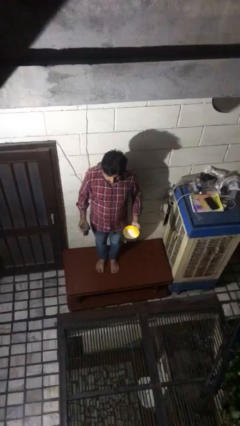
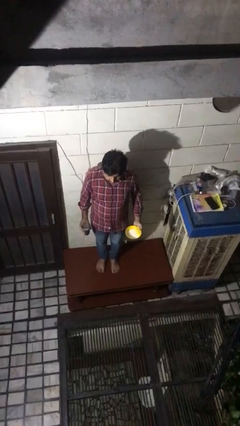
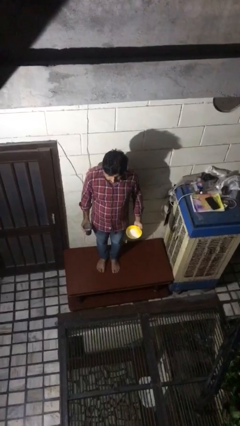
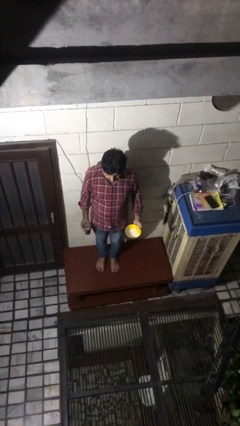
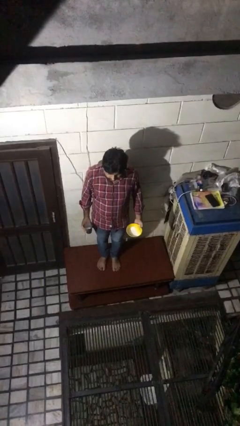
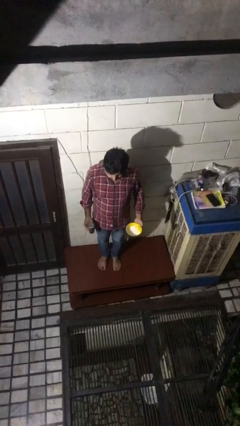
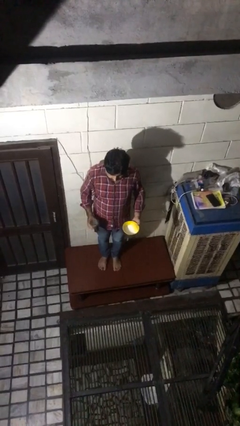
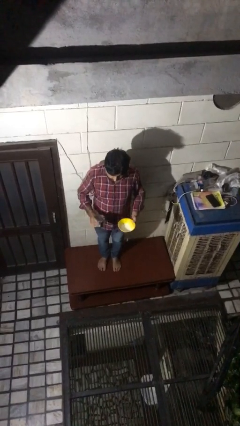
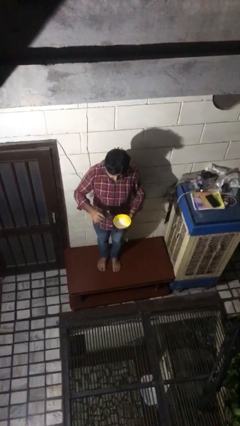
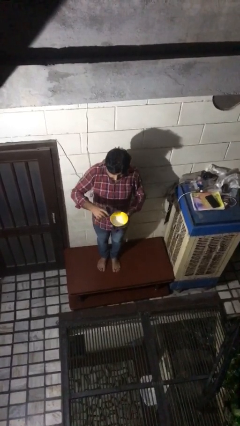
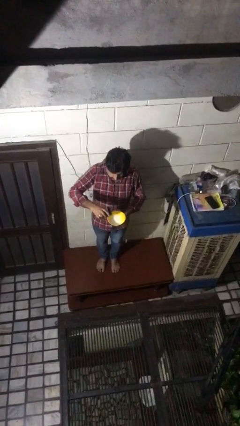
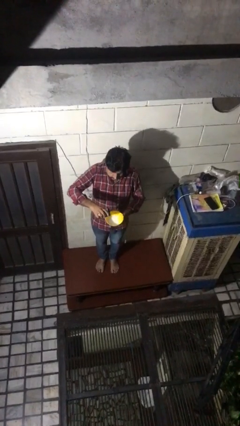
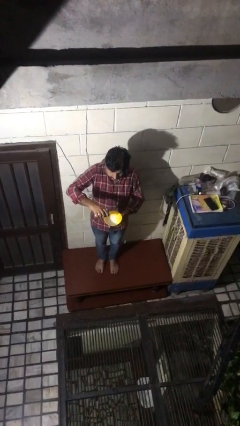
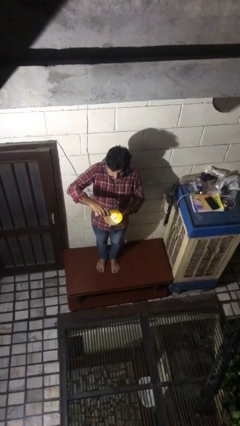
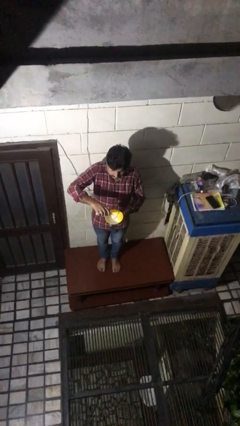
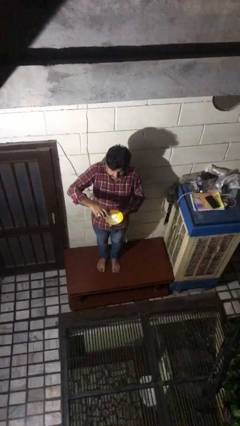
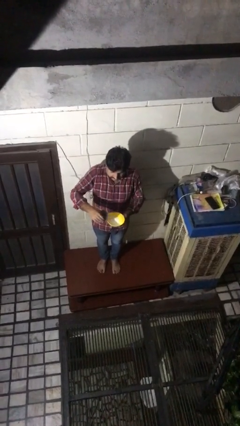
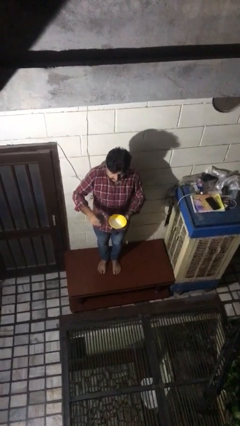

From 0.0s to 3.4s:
person pours into bowl

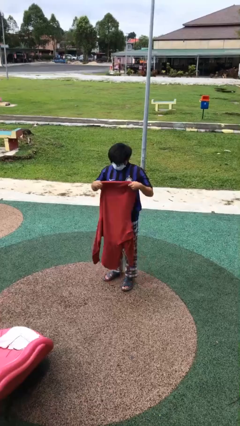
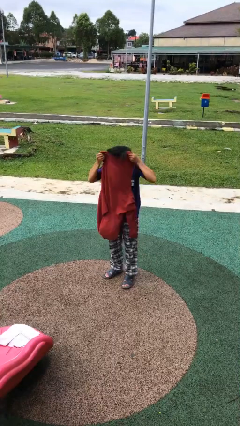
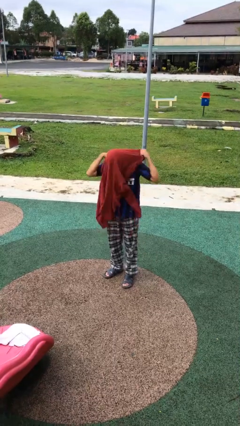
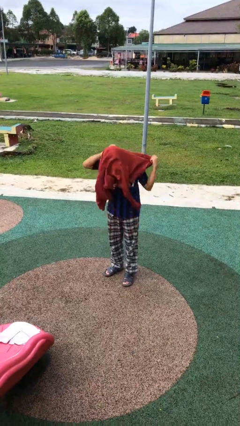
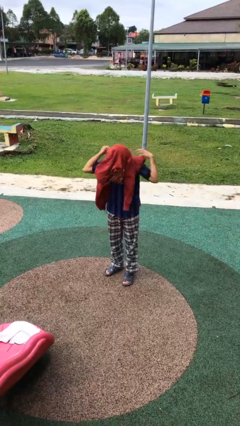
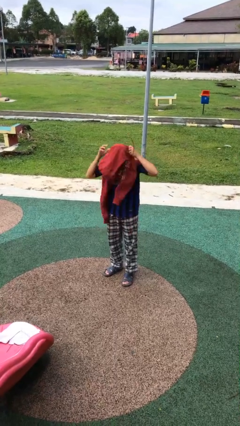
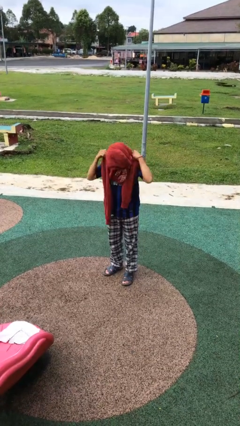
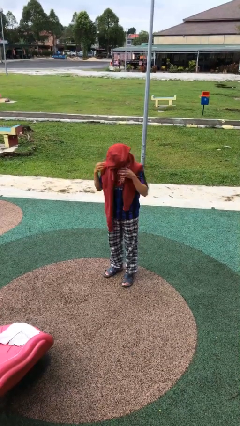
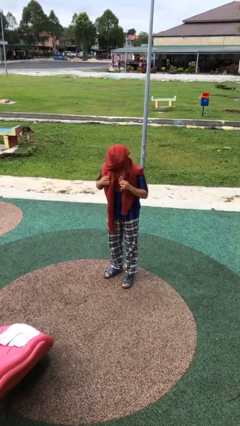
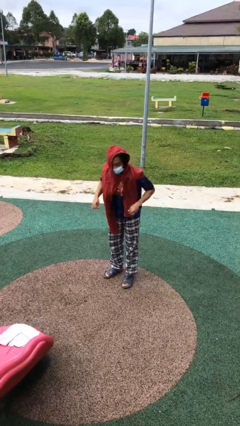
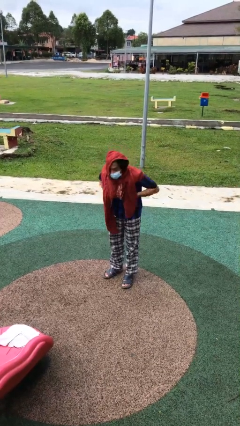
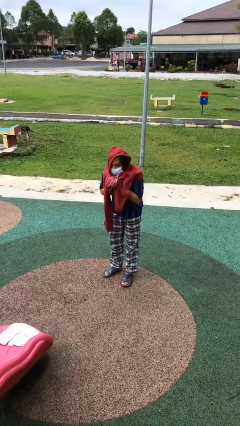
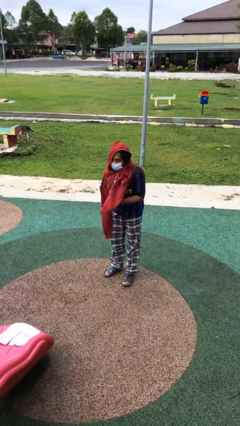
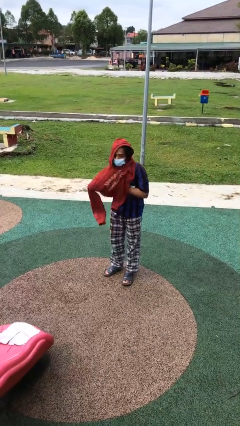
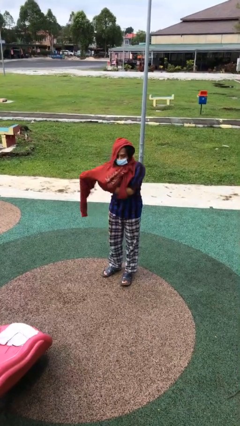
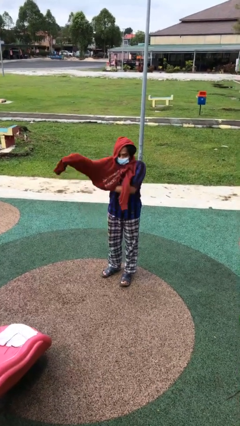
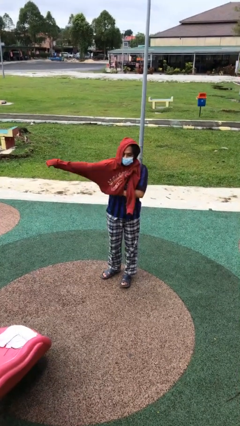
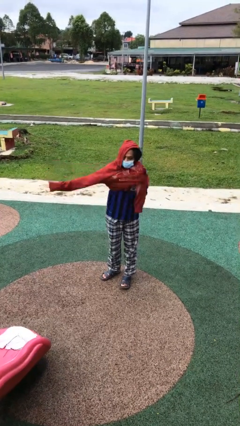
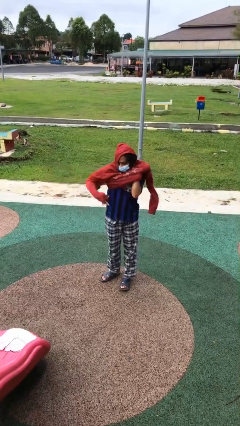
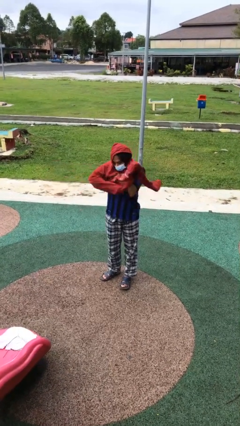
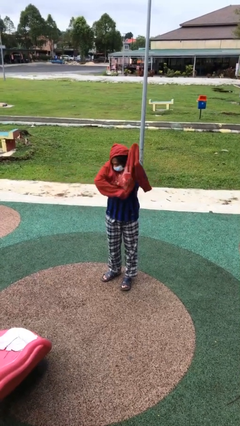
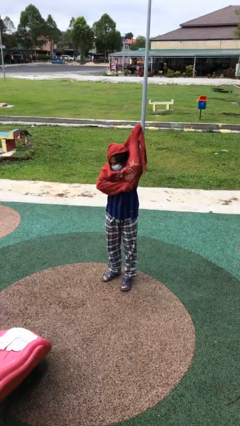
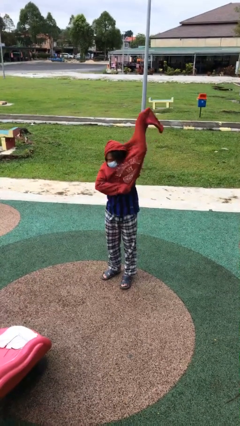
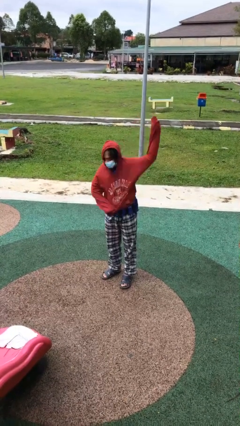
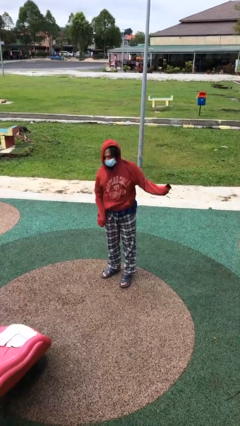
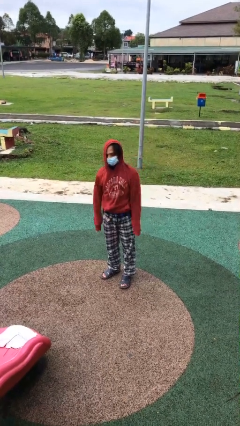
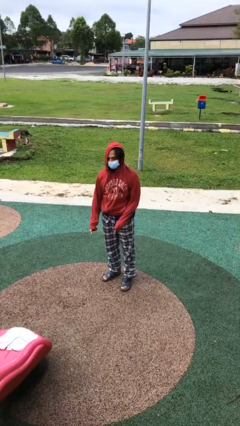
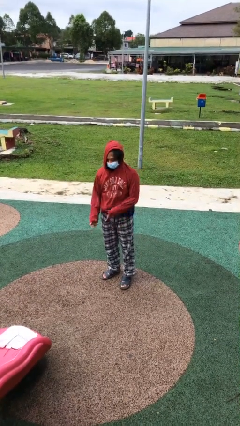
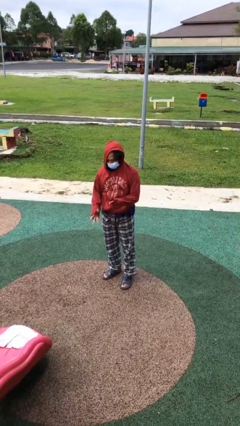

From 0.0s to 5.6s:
person puts on hoodie

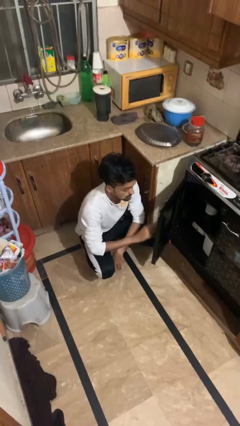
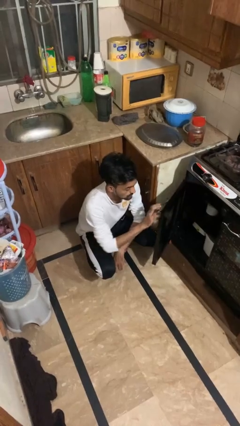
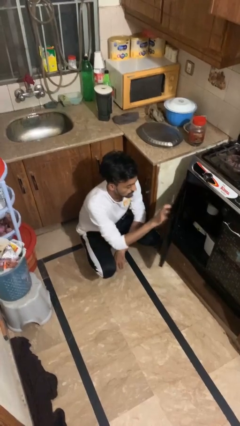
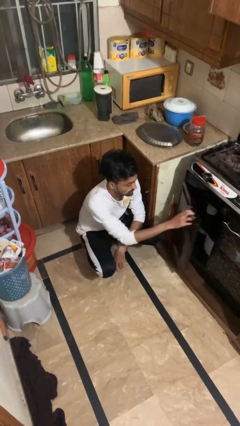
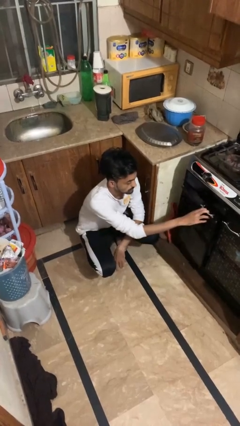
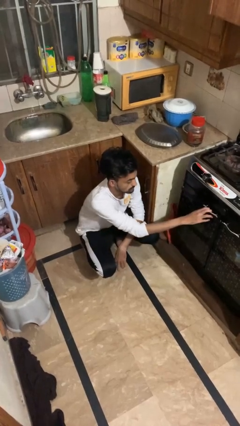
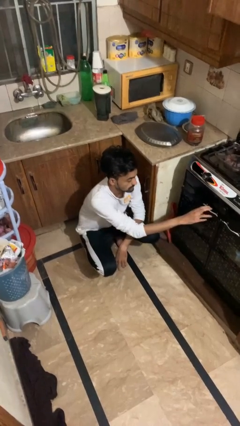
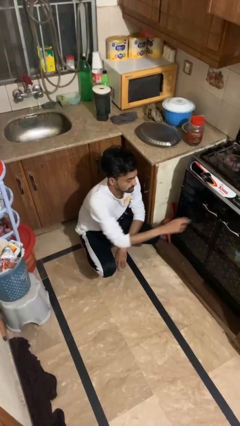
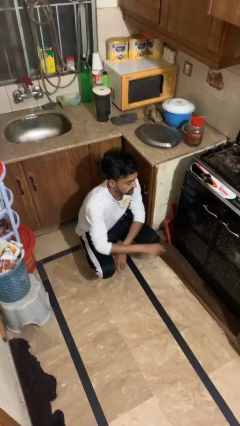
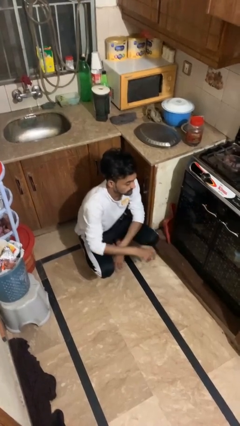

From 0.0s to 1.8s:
person closes oven door

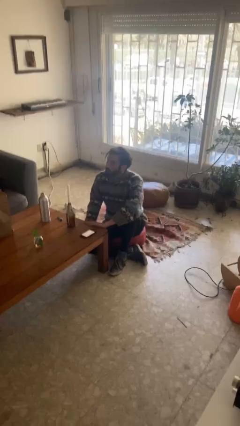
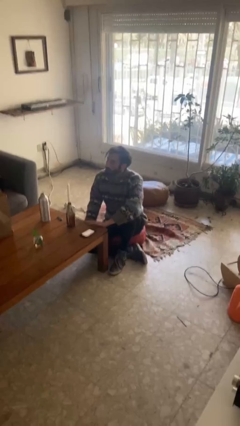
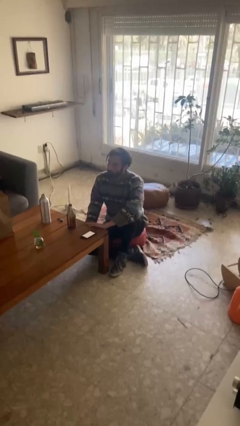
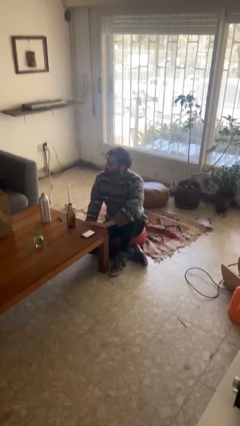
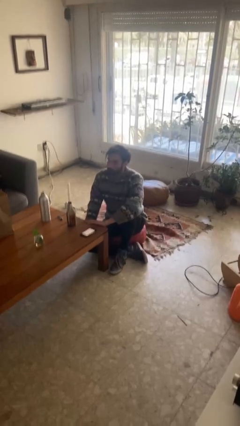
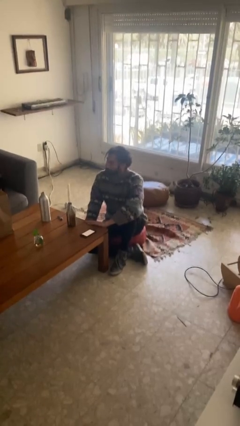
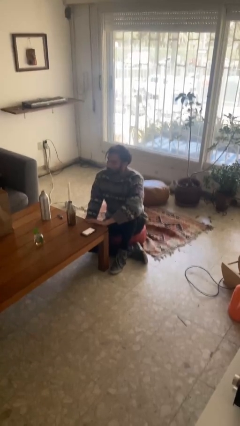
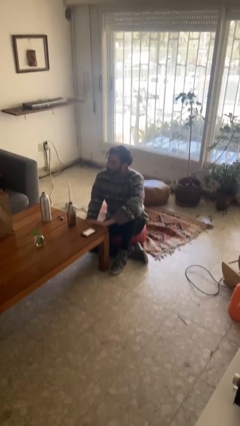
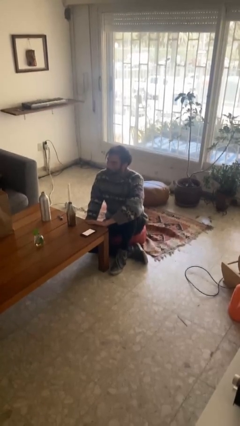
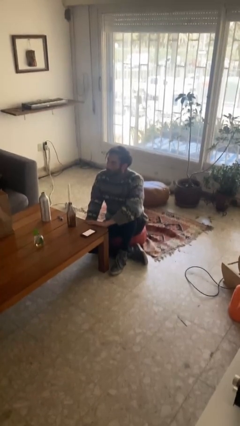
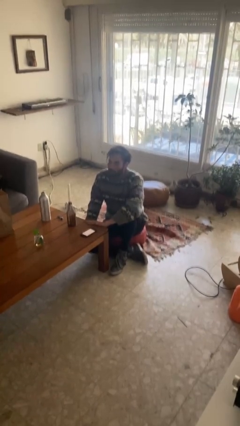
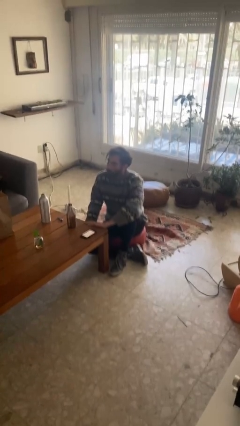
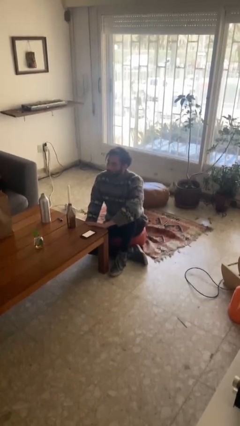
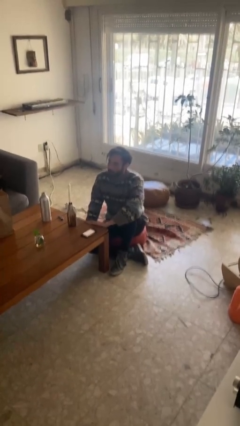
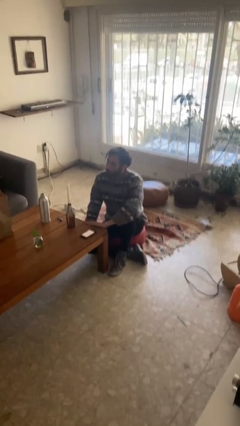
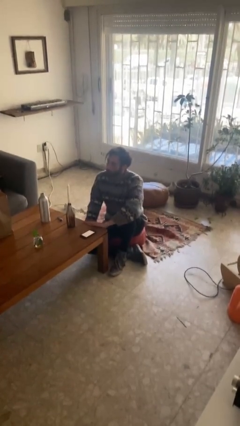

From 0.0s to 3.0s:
person shakes head

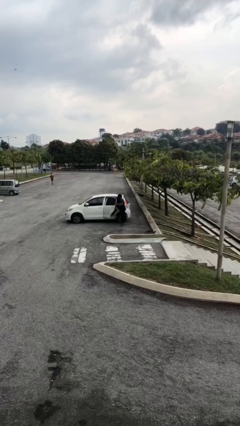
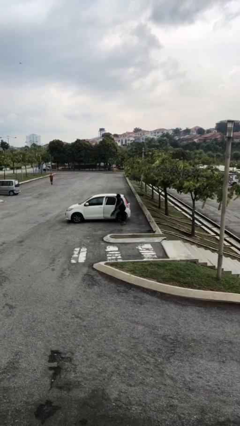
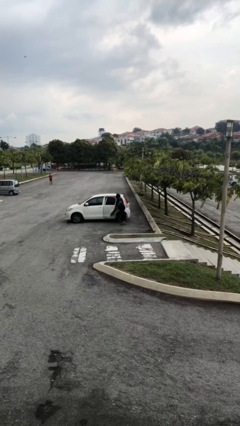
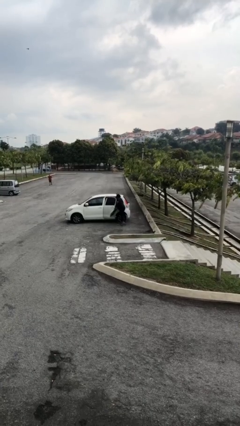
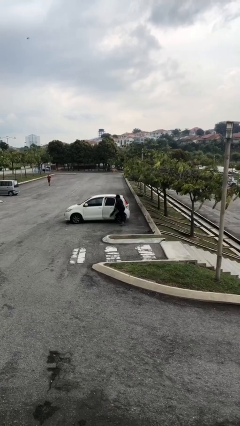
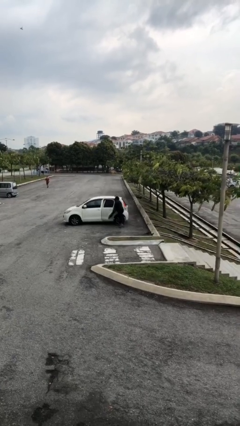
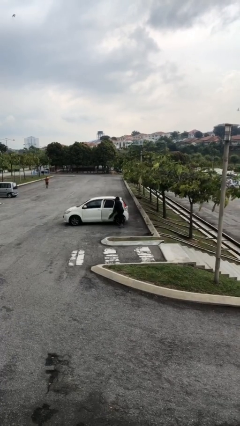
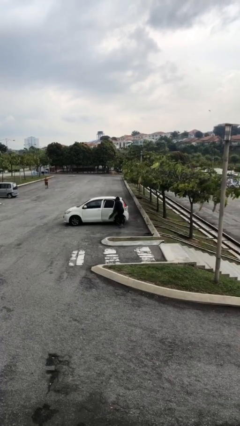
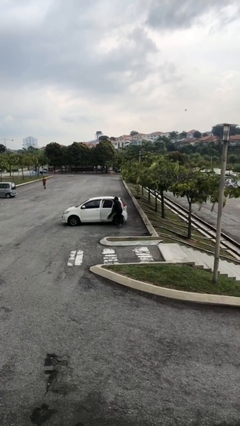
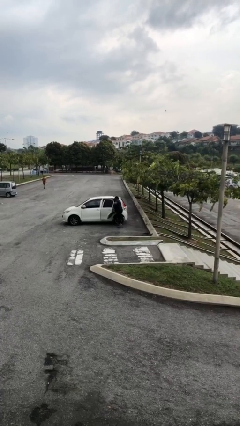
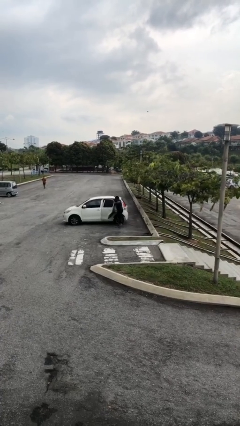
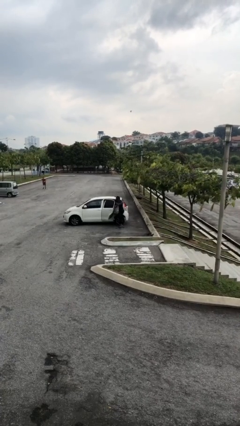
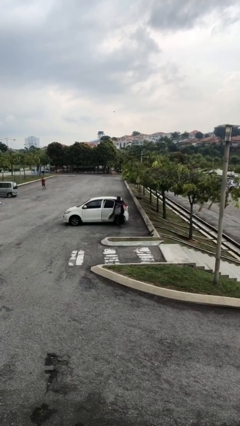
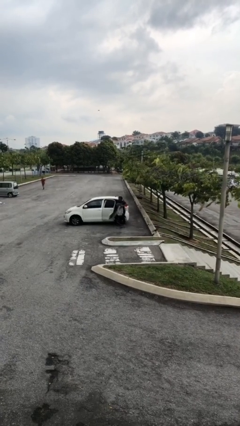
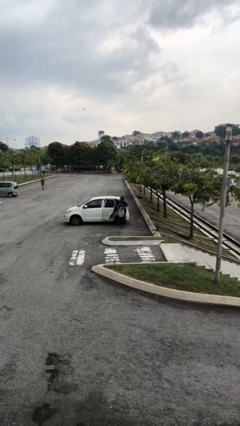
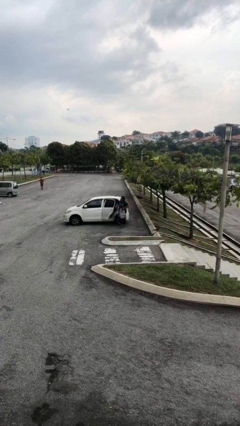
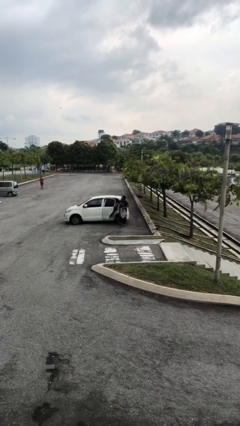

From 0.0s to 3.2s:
person unloads car

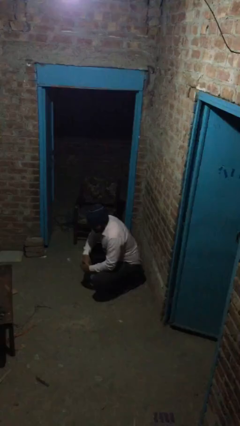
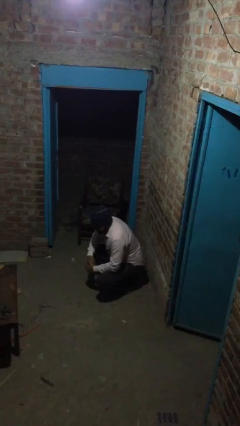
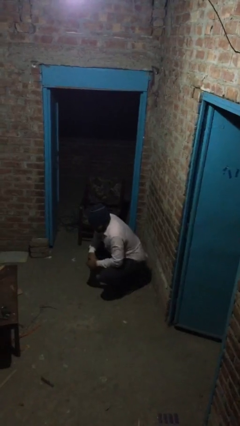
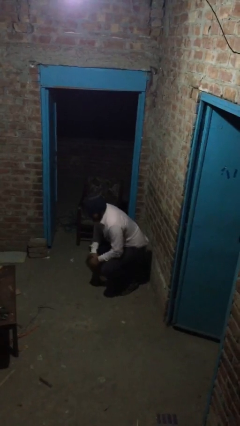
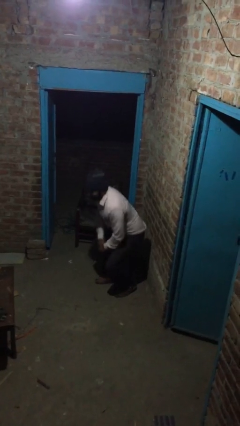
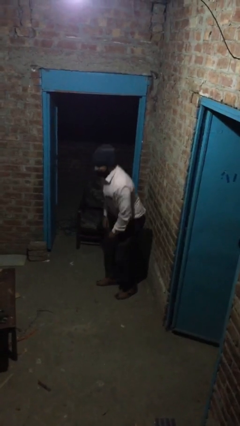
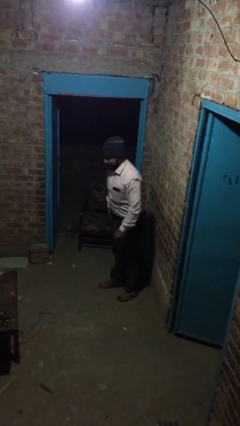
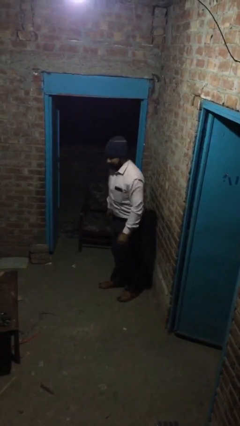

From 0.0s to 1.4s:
person stands up
